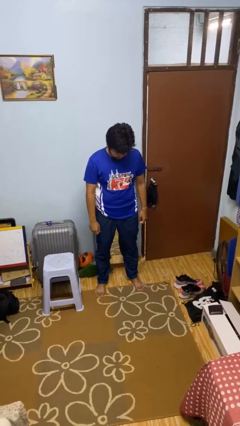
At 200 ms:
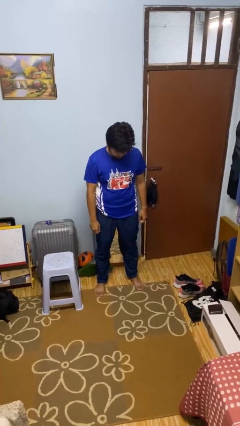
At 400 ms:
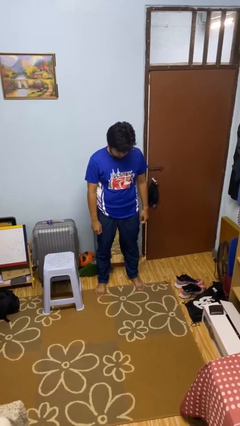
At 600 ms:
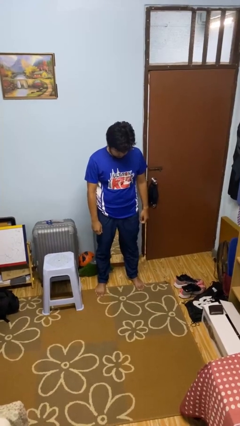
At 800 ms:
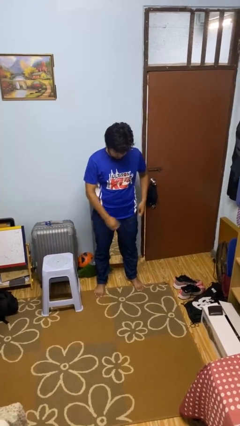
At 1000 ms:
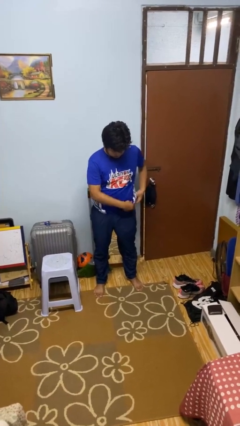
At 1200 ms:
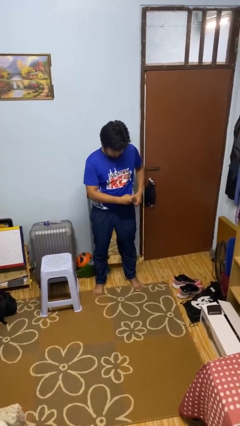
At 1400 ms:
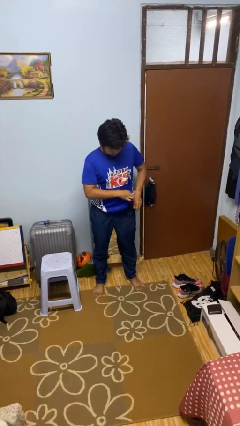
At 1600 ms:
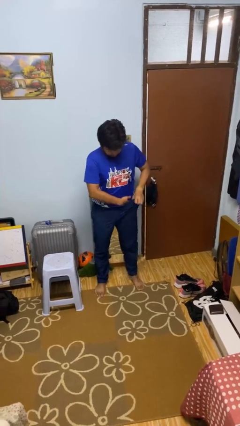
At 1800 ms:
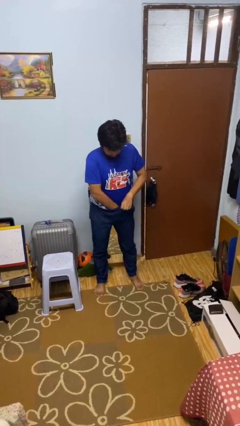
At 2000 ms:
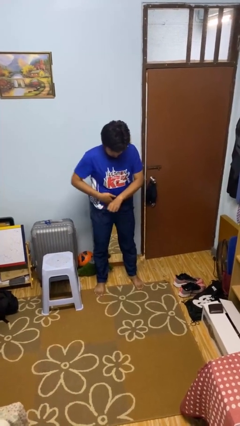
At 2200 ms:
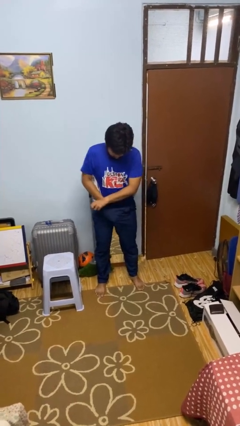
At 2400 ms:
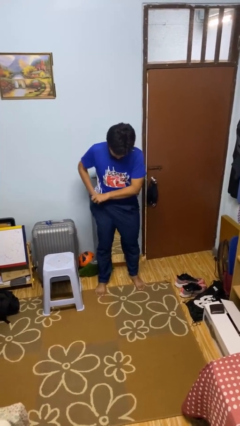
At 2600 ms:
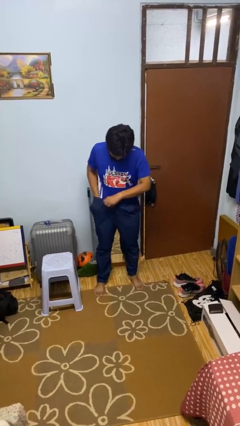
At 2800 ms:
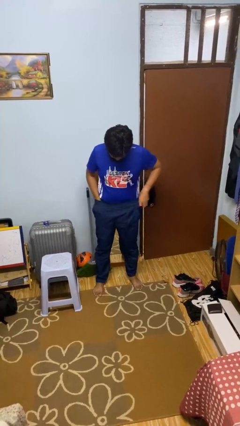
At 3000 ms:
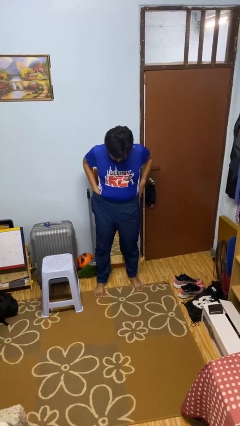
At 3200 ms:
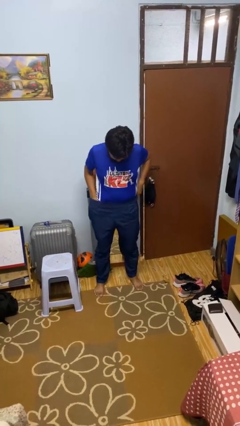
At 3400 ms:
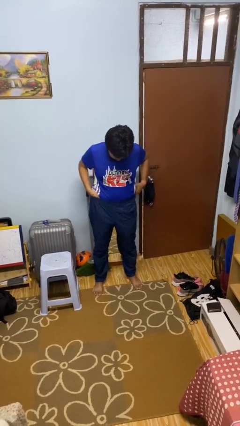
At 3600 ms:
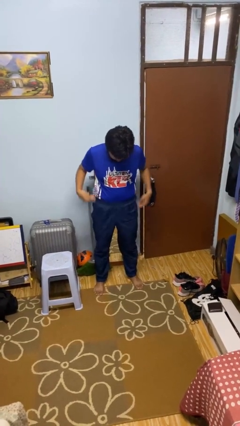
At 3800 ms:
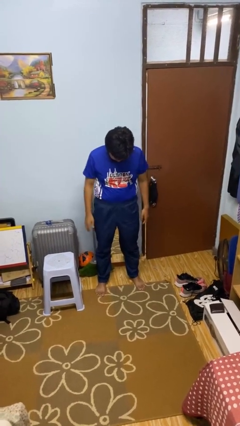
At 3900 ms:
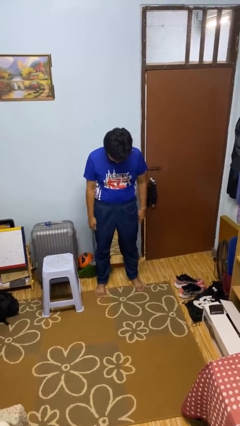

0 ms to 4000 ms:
person tucks in shirt

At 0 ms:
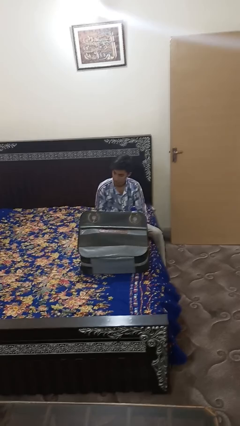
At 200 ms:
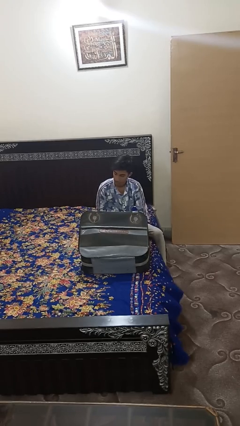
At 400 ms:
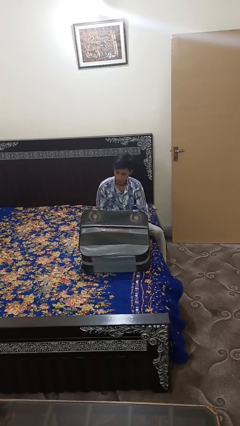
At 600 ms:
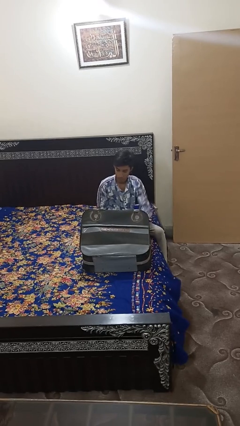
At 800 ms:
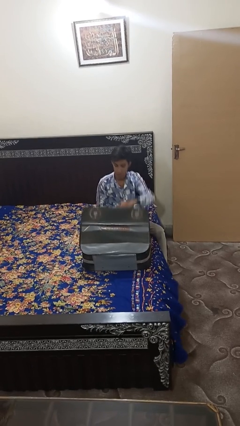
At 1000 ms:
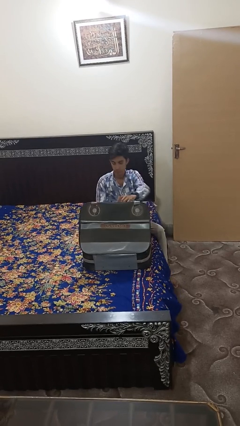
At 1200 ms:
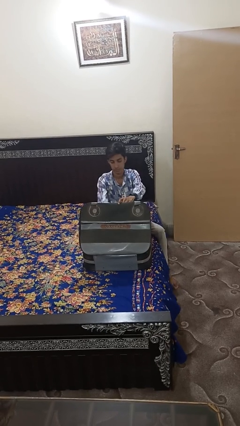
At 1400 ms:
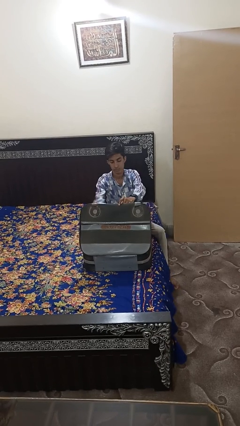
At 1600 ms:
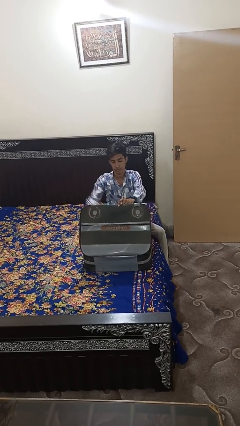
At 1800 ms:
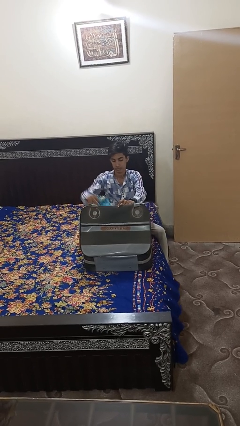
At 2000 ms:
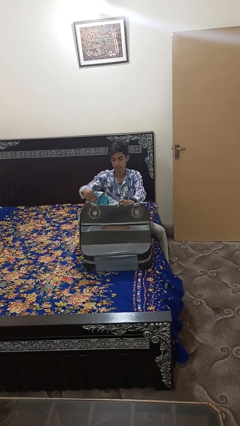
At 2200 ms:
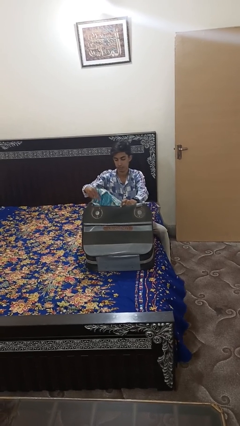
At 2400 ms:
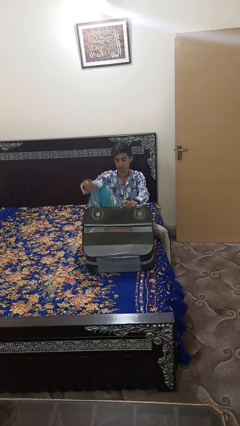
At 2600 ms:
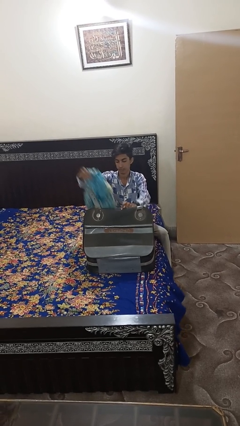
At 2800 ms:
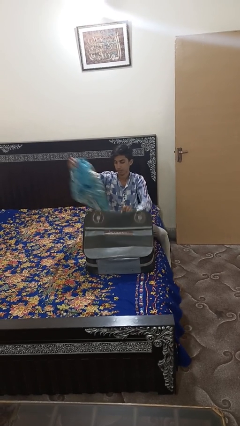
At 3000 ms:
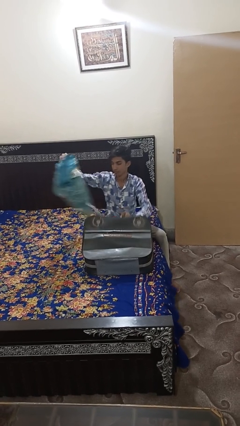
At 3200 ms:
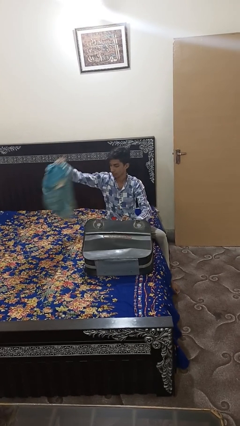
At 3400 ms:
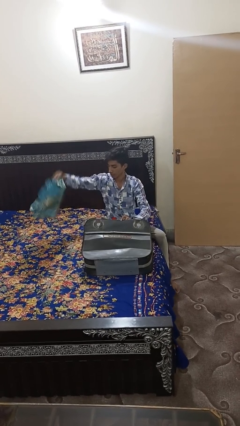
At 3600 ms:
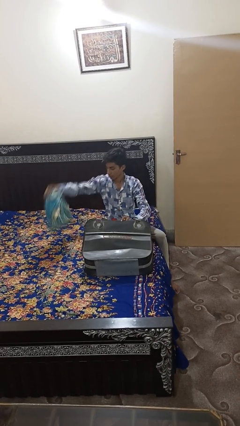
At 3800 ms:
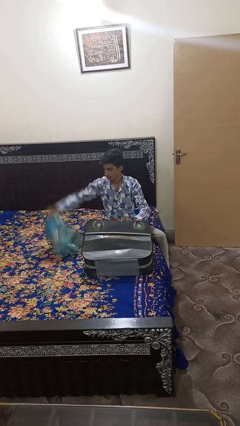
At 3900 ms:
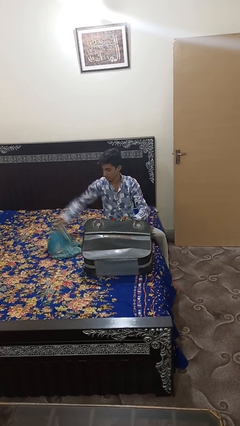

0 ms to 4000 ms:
person unloads clothes from suitcase

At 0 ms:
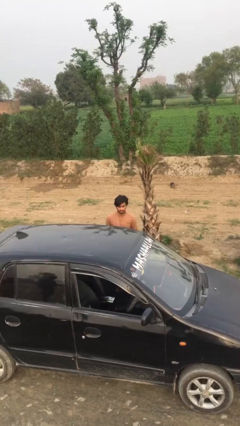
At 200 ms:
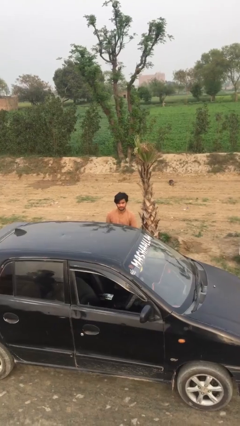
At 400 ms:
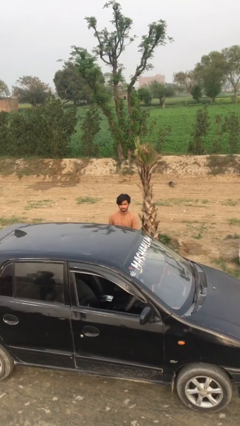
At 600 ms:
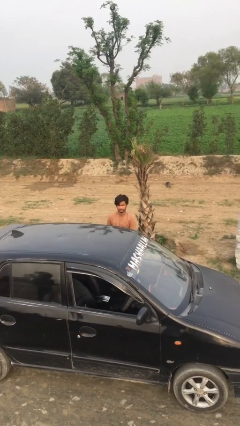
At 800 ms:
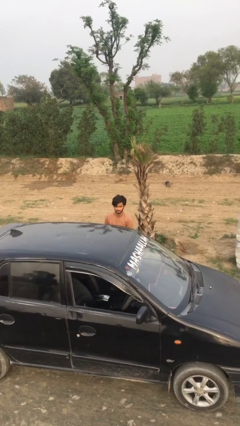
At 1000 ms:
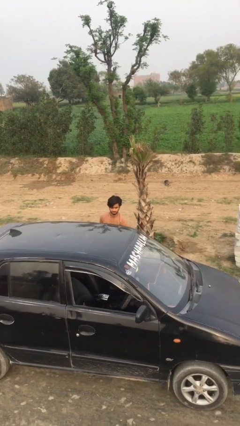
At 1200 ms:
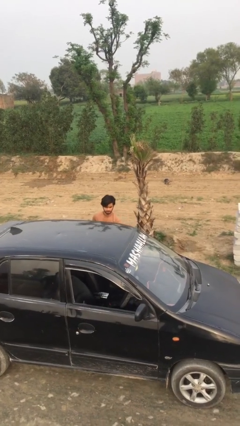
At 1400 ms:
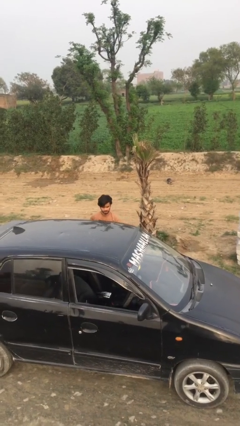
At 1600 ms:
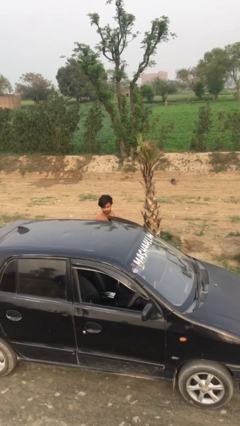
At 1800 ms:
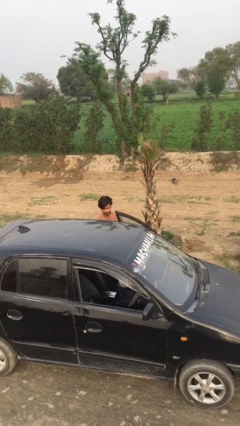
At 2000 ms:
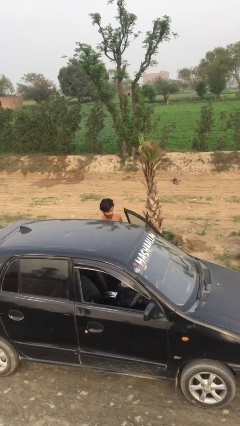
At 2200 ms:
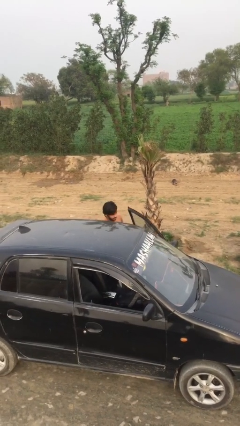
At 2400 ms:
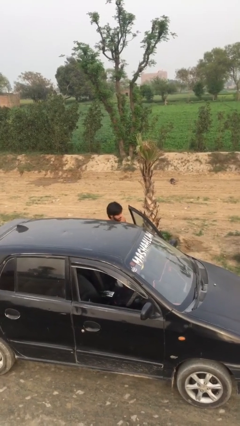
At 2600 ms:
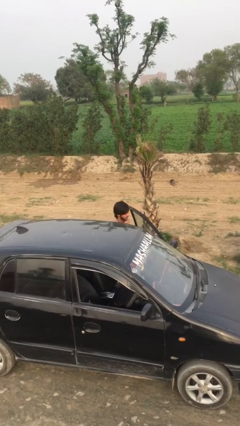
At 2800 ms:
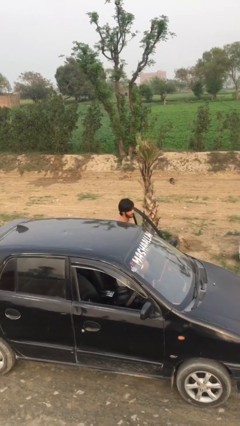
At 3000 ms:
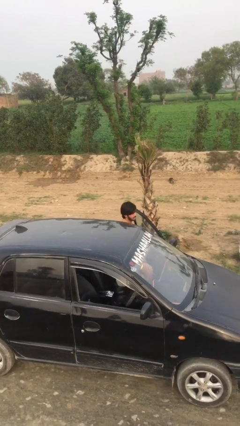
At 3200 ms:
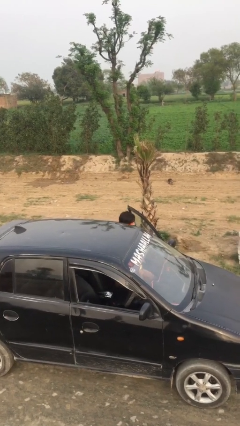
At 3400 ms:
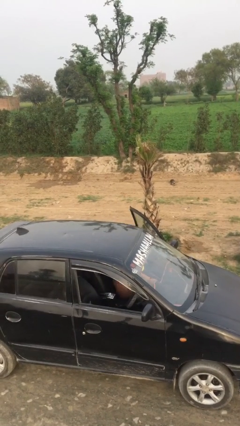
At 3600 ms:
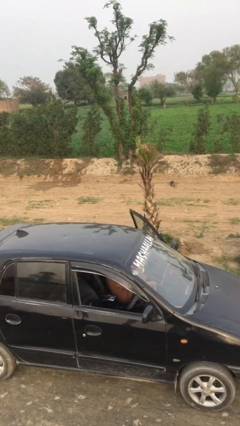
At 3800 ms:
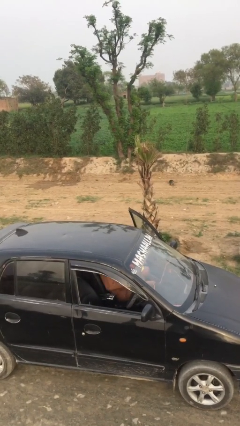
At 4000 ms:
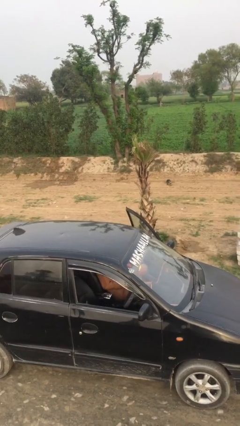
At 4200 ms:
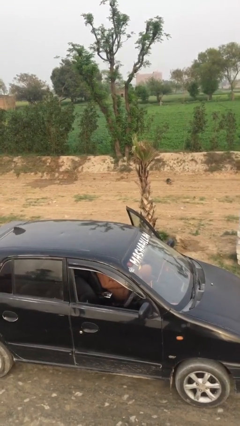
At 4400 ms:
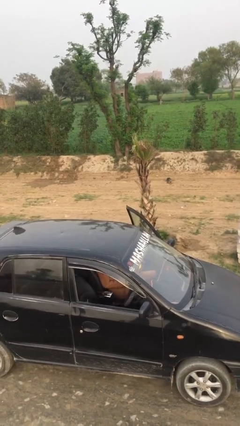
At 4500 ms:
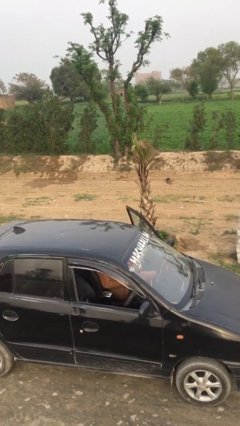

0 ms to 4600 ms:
car picks up person

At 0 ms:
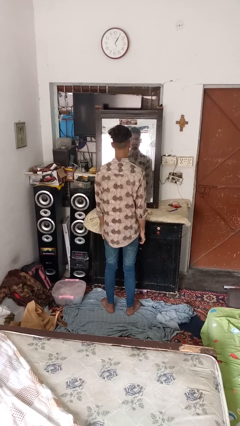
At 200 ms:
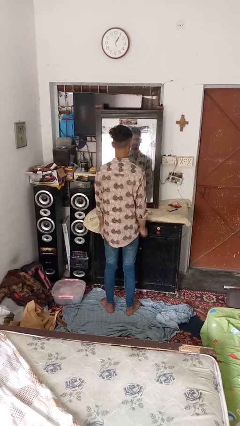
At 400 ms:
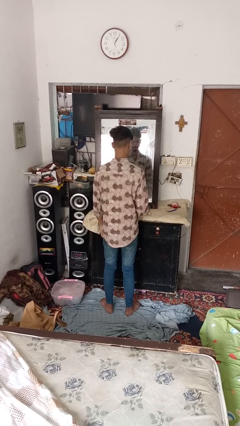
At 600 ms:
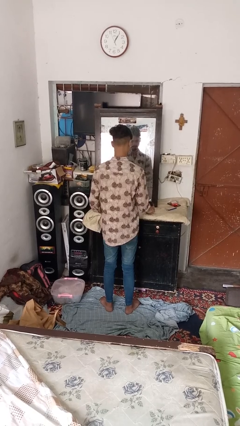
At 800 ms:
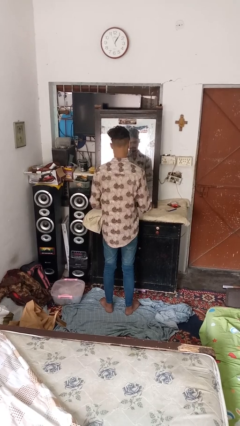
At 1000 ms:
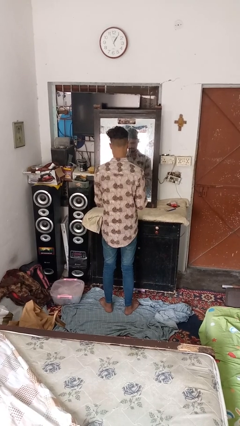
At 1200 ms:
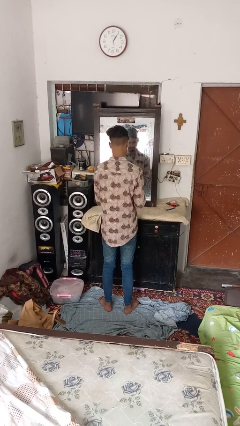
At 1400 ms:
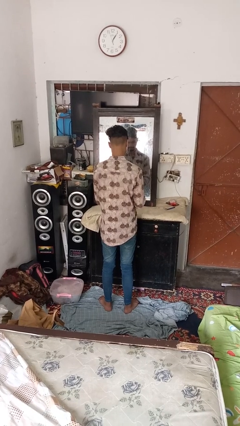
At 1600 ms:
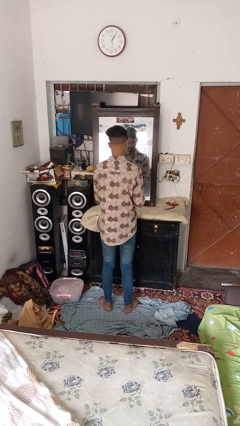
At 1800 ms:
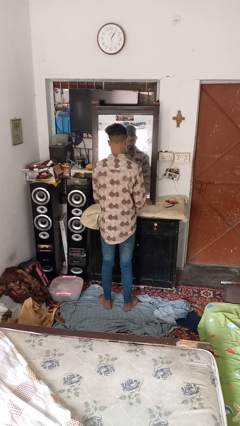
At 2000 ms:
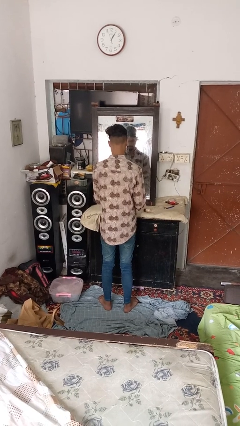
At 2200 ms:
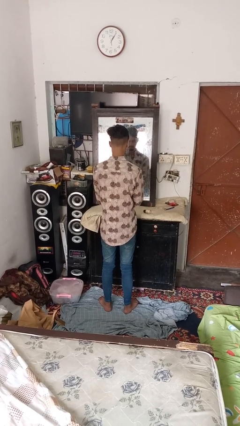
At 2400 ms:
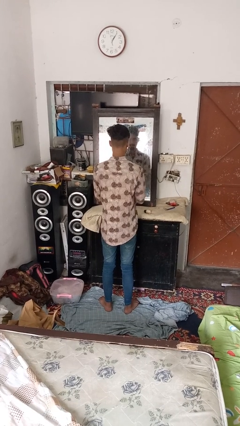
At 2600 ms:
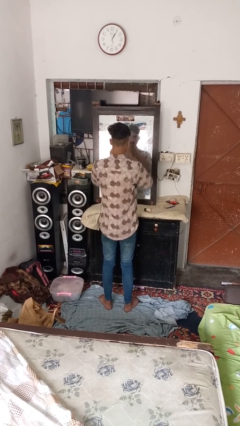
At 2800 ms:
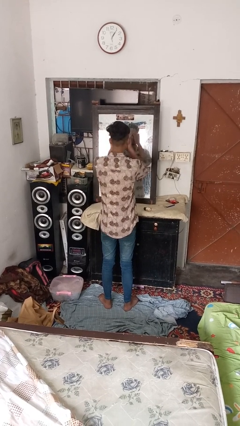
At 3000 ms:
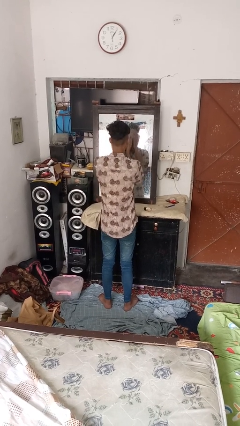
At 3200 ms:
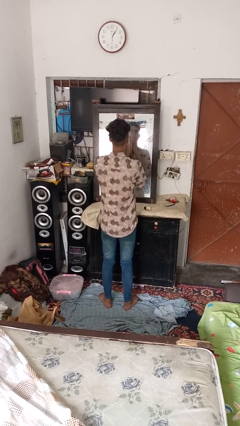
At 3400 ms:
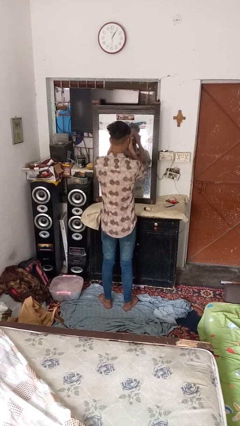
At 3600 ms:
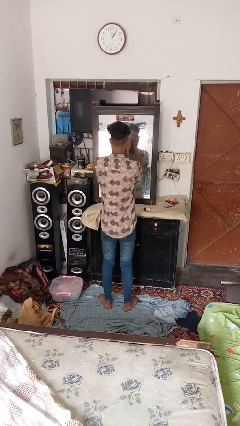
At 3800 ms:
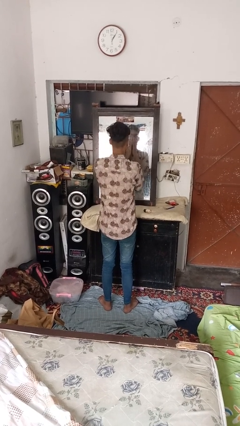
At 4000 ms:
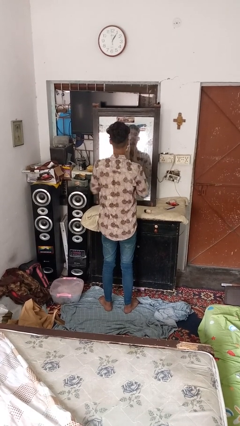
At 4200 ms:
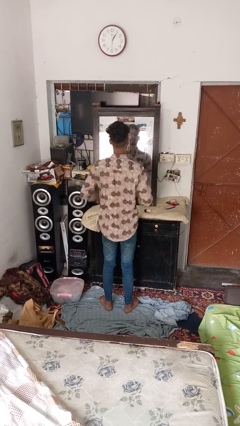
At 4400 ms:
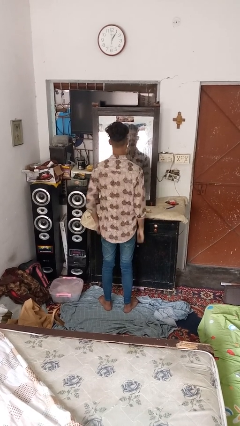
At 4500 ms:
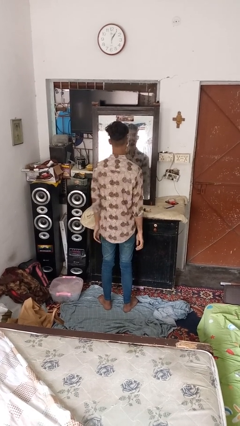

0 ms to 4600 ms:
person applies foundation makeup

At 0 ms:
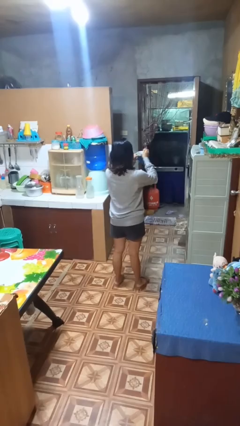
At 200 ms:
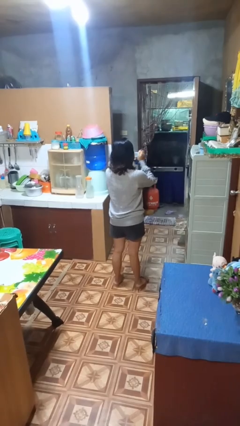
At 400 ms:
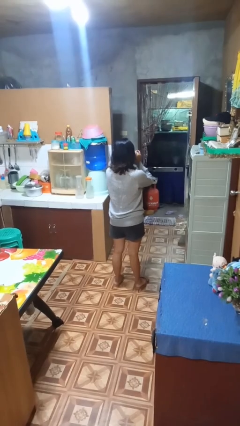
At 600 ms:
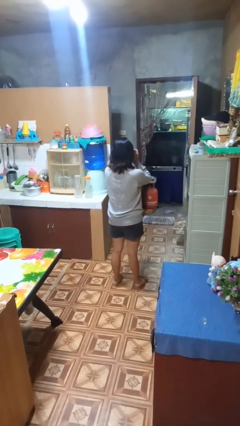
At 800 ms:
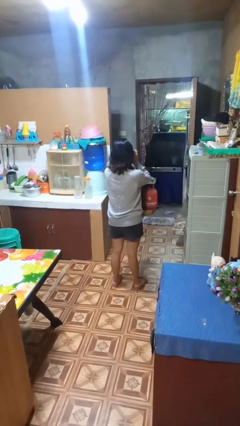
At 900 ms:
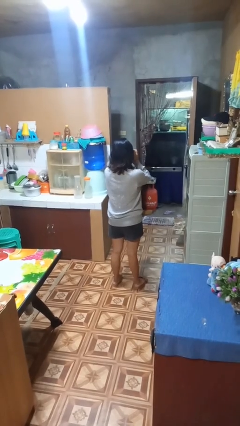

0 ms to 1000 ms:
person drinks from mug
